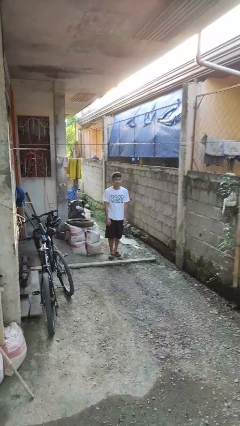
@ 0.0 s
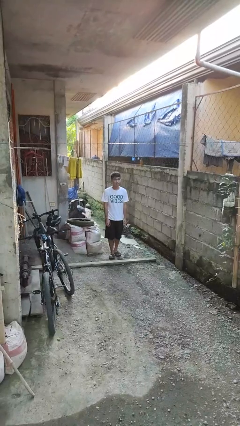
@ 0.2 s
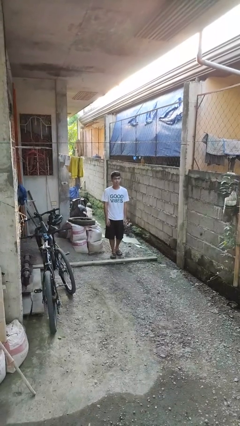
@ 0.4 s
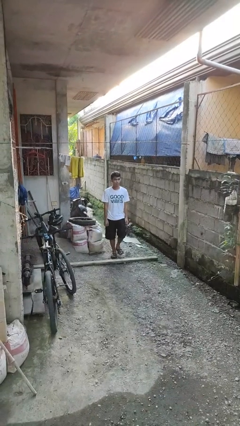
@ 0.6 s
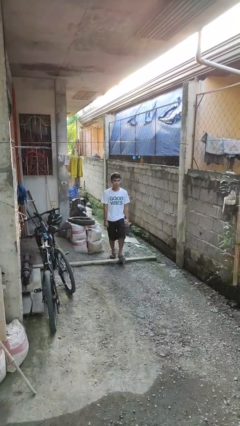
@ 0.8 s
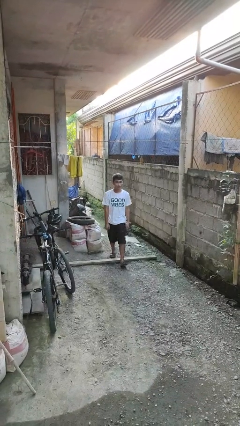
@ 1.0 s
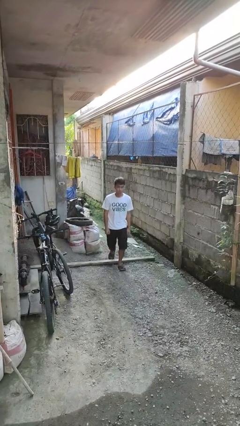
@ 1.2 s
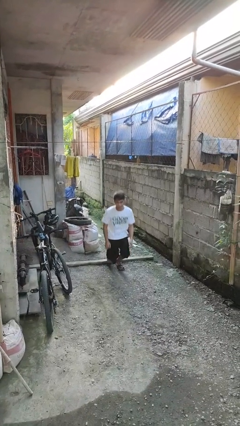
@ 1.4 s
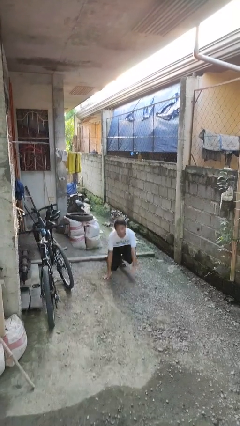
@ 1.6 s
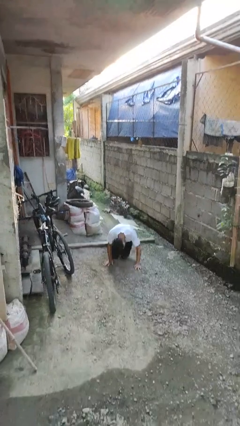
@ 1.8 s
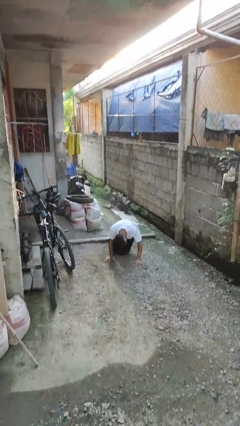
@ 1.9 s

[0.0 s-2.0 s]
person trips on object on floor

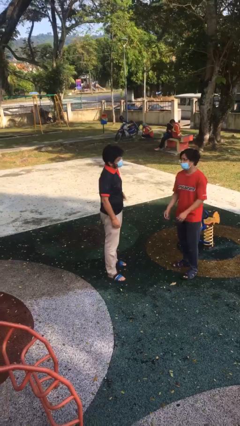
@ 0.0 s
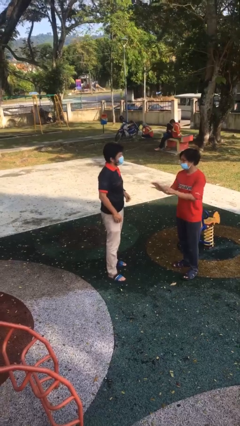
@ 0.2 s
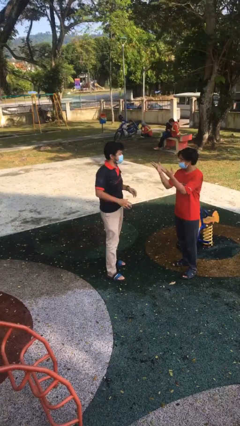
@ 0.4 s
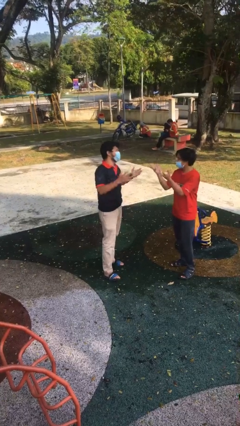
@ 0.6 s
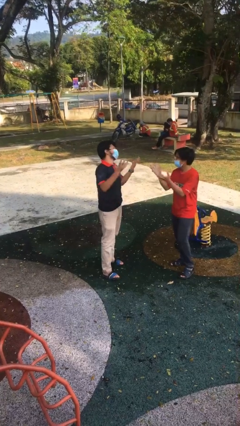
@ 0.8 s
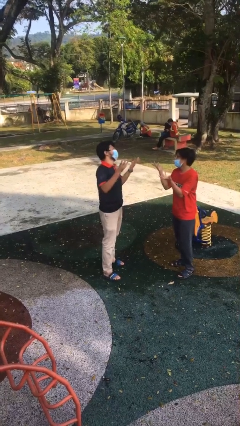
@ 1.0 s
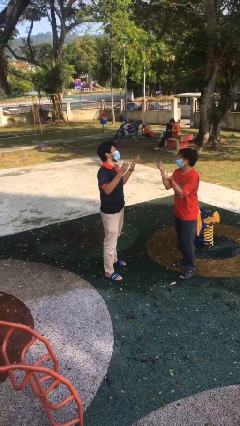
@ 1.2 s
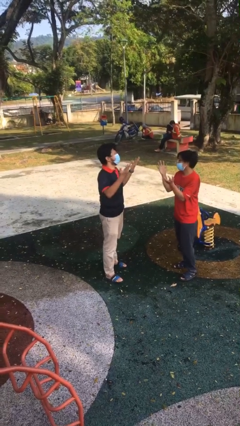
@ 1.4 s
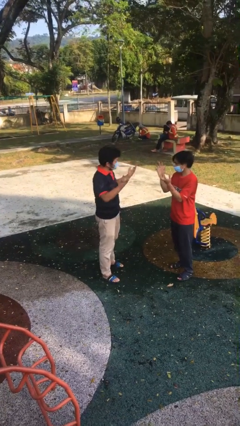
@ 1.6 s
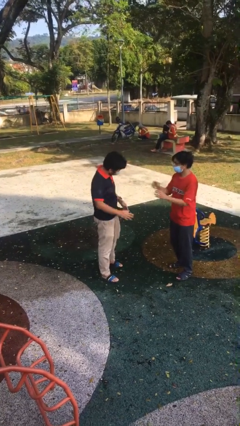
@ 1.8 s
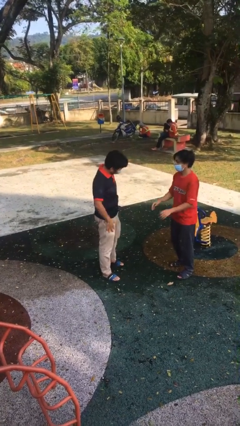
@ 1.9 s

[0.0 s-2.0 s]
person talks to person

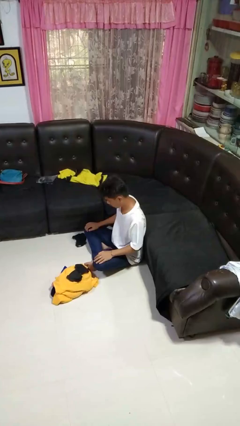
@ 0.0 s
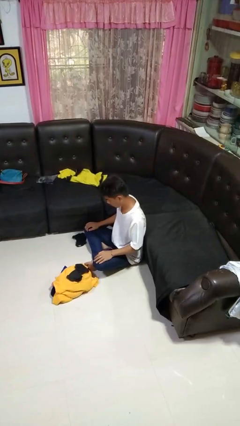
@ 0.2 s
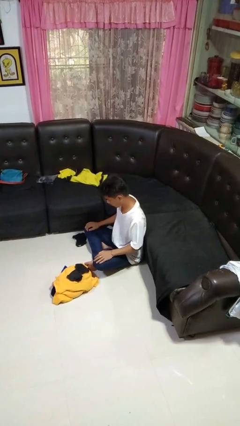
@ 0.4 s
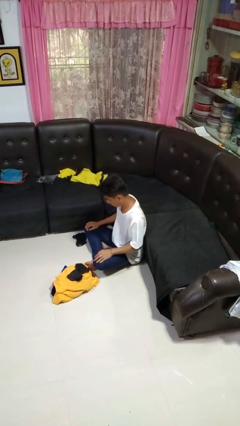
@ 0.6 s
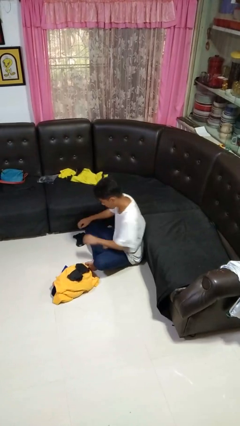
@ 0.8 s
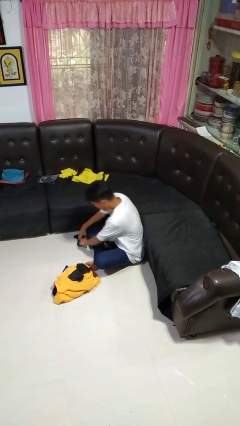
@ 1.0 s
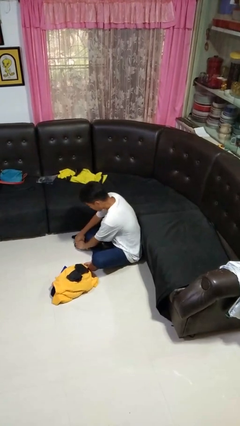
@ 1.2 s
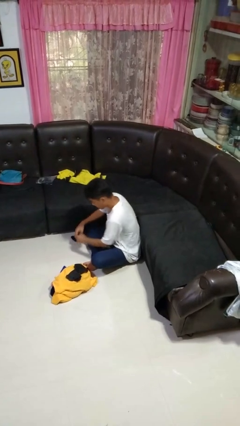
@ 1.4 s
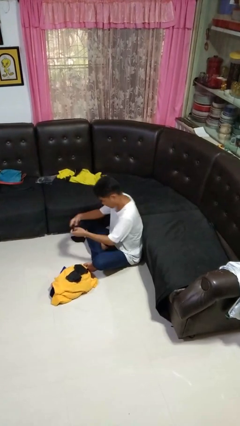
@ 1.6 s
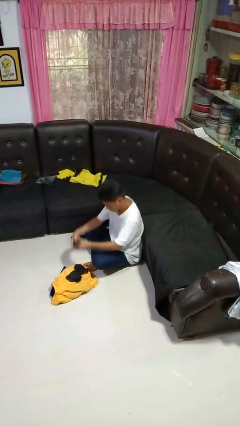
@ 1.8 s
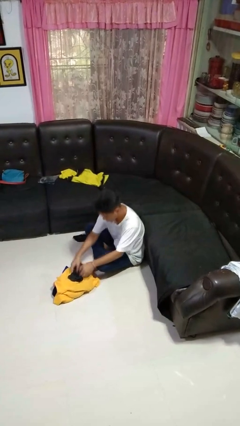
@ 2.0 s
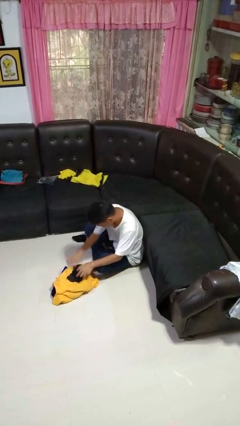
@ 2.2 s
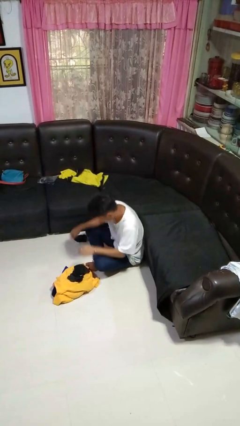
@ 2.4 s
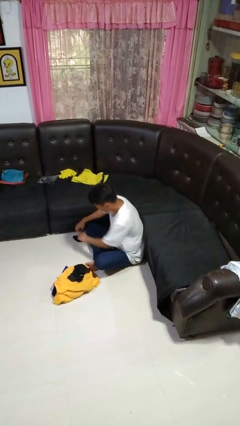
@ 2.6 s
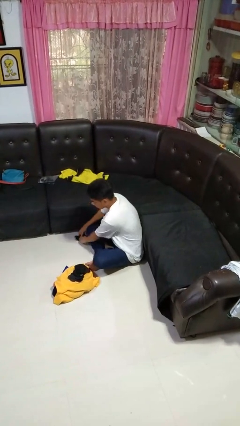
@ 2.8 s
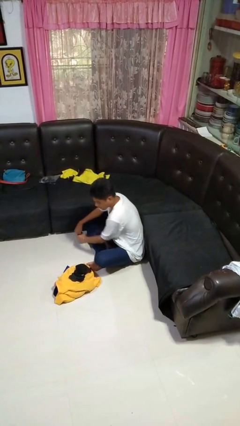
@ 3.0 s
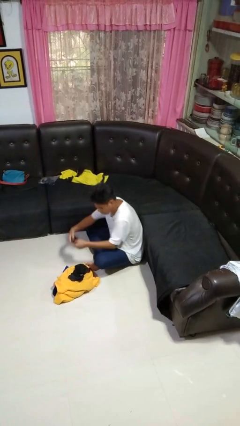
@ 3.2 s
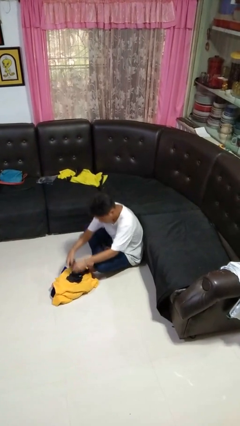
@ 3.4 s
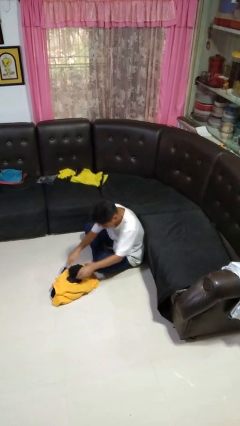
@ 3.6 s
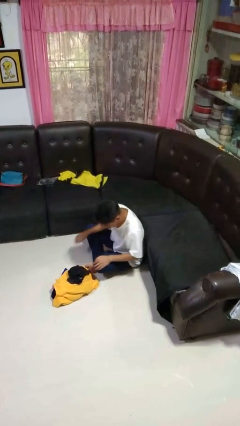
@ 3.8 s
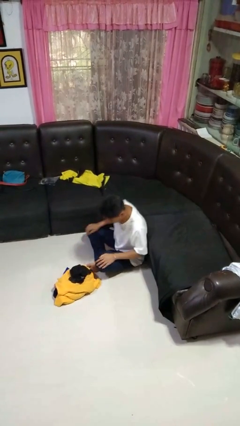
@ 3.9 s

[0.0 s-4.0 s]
person folds socks

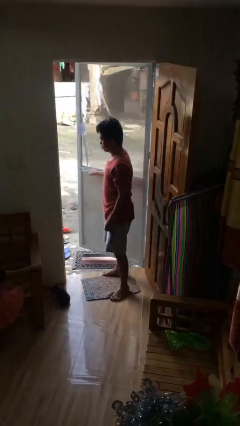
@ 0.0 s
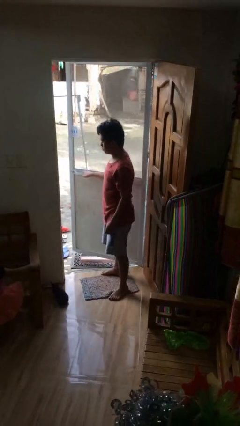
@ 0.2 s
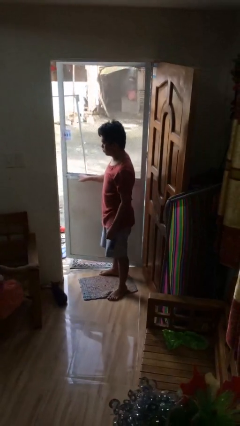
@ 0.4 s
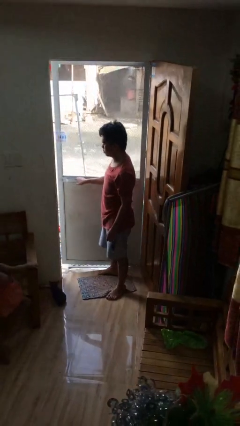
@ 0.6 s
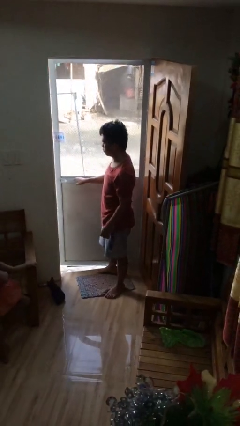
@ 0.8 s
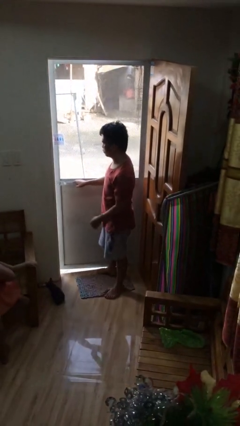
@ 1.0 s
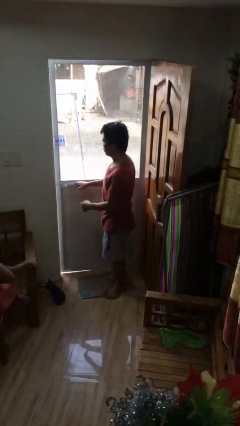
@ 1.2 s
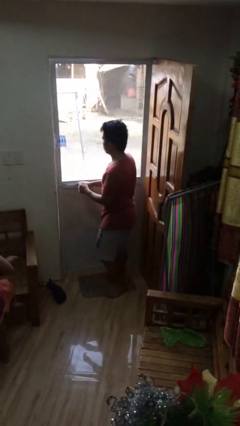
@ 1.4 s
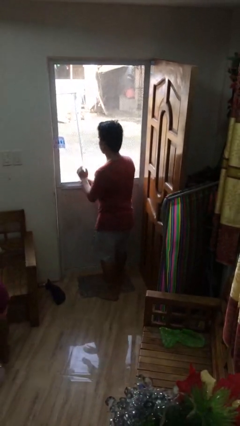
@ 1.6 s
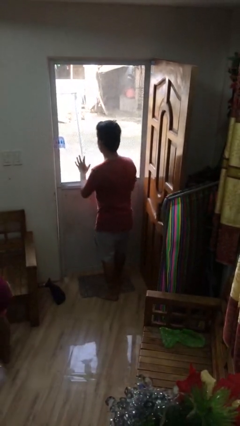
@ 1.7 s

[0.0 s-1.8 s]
person closes facility door

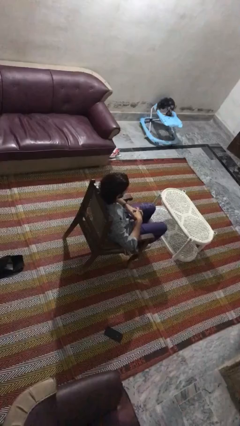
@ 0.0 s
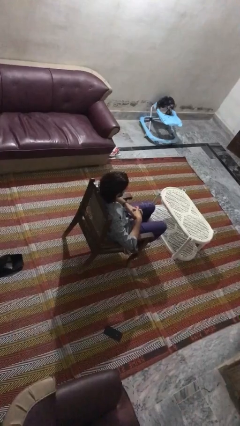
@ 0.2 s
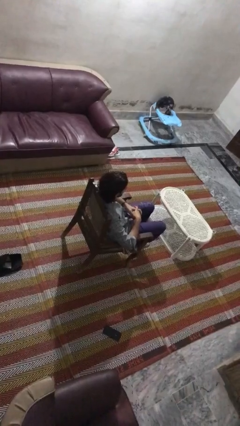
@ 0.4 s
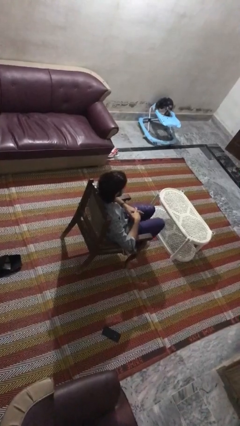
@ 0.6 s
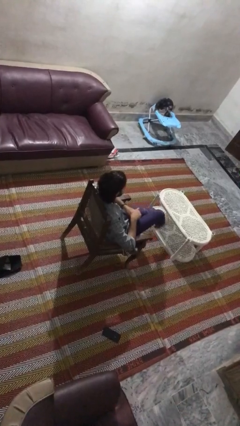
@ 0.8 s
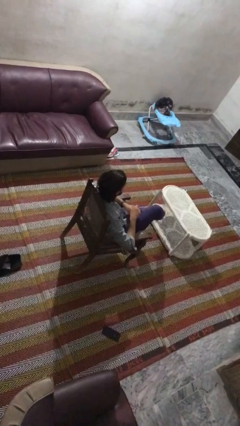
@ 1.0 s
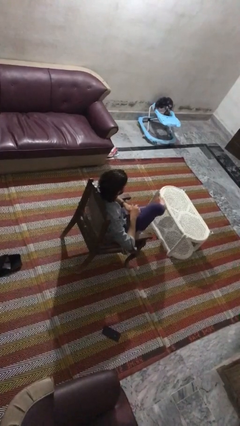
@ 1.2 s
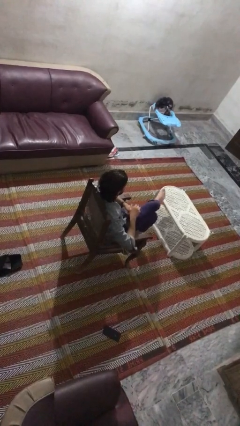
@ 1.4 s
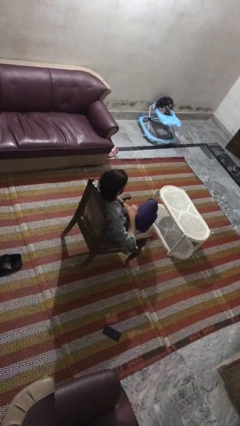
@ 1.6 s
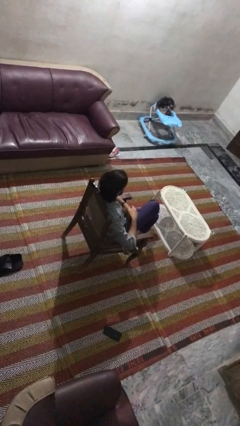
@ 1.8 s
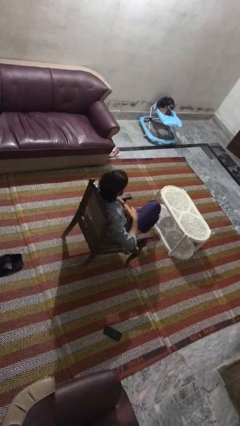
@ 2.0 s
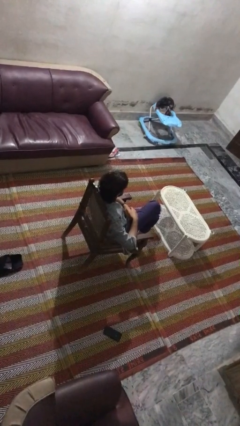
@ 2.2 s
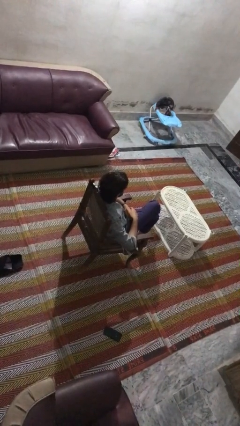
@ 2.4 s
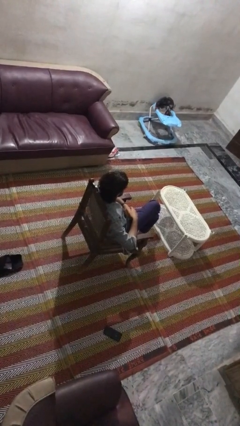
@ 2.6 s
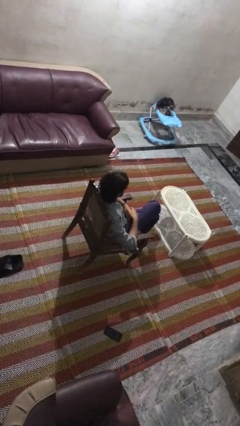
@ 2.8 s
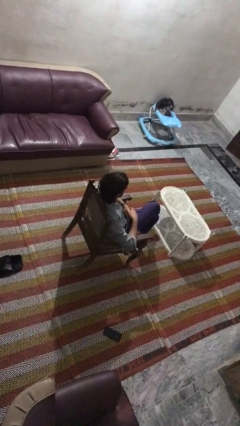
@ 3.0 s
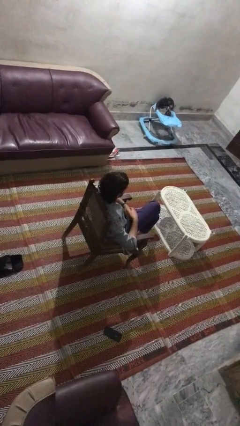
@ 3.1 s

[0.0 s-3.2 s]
person crosses legs

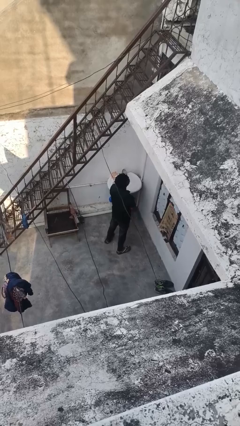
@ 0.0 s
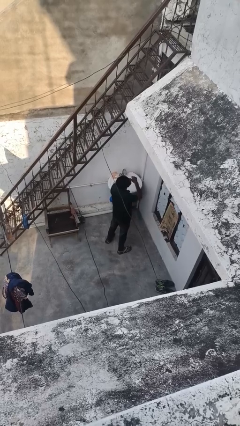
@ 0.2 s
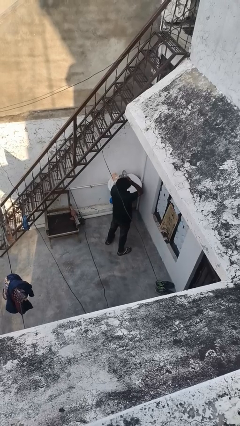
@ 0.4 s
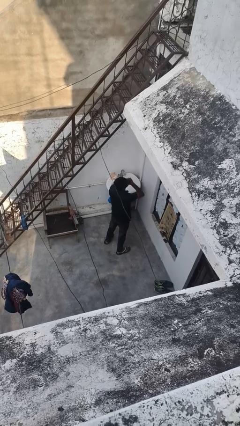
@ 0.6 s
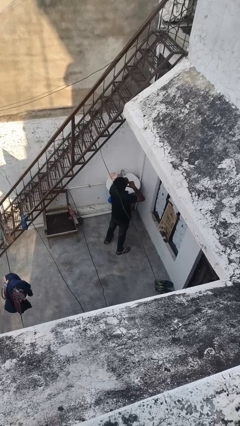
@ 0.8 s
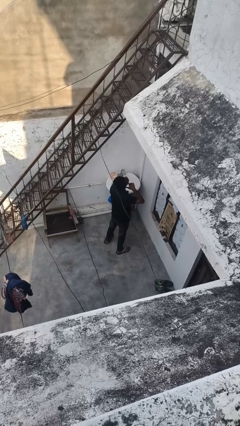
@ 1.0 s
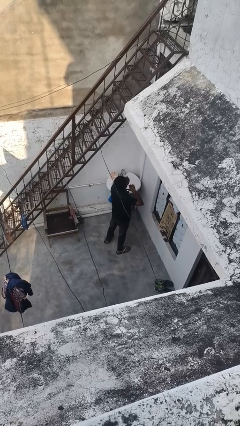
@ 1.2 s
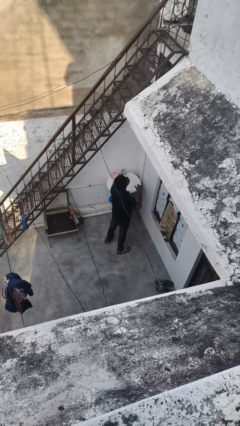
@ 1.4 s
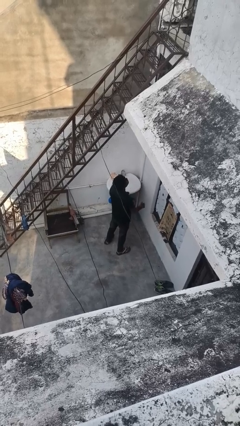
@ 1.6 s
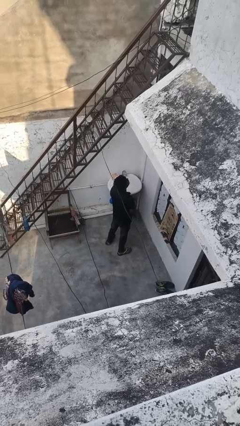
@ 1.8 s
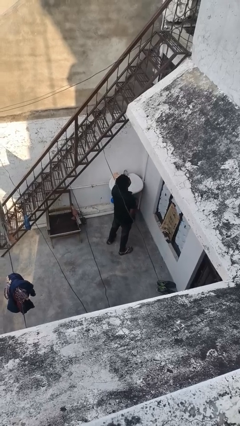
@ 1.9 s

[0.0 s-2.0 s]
person gestures cut

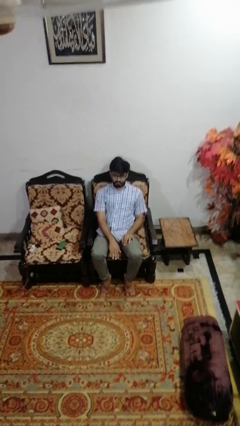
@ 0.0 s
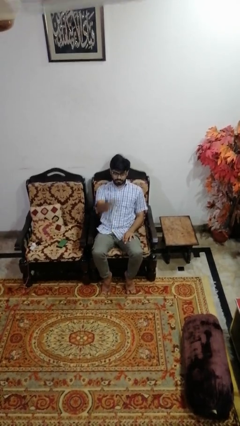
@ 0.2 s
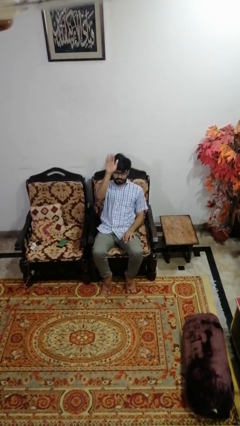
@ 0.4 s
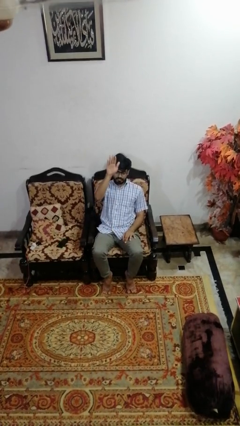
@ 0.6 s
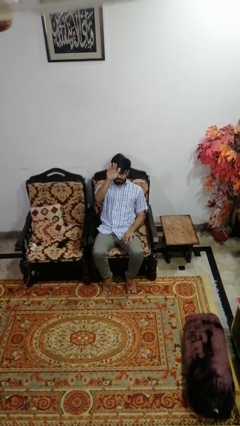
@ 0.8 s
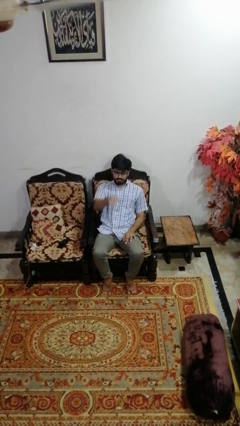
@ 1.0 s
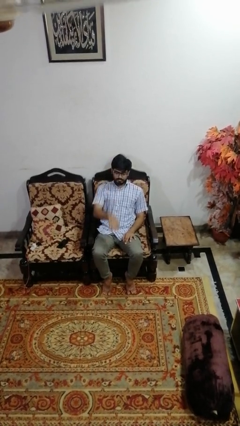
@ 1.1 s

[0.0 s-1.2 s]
person gestures swipe up

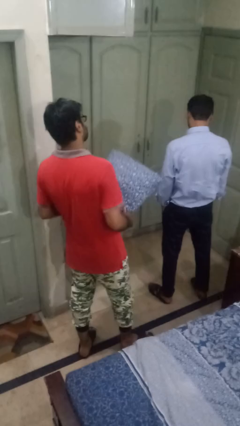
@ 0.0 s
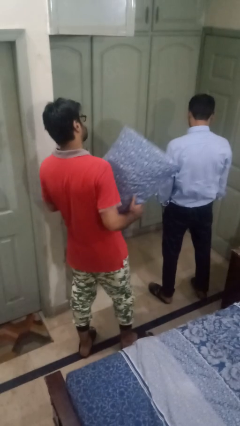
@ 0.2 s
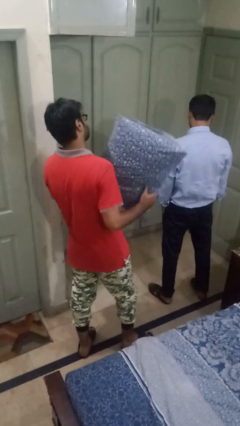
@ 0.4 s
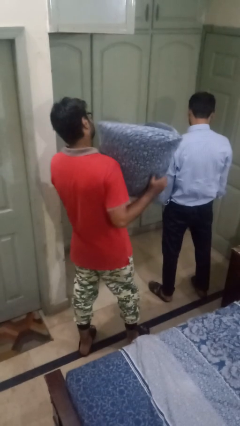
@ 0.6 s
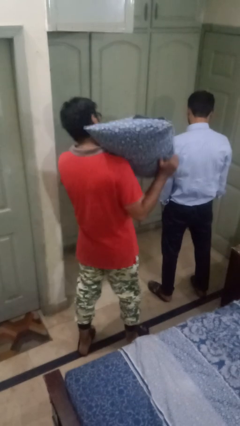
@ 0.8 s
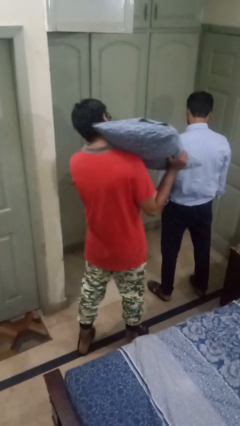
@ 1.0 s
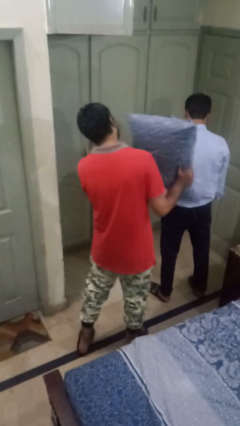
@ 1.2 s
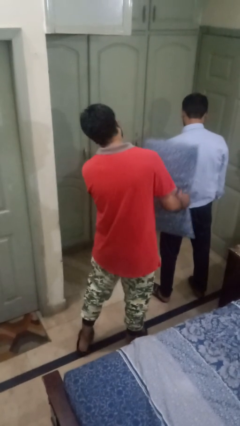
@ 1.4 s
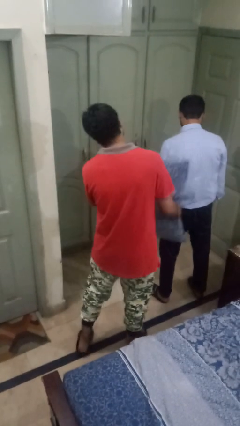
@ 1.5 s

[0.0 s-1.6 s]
person hits person with pillow
